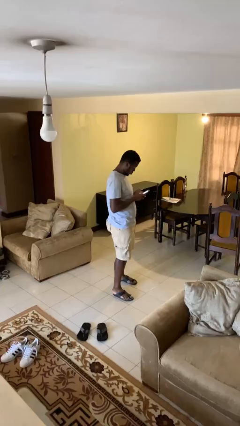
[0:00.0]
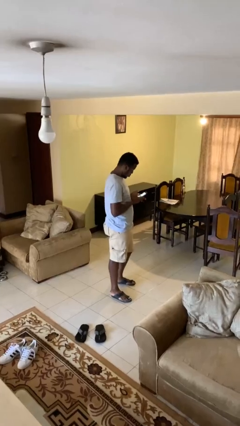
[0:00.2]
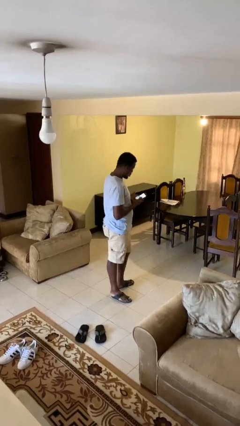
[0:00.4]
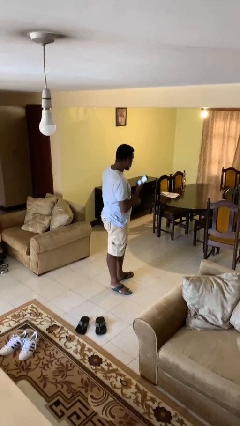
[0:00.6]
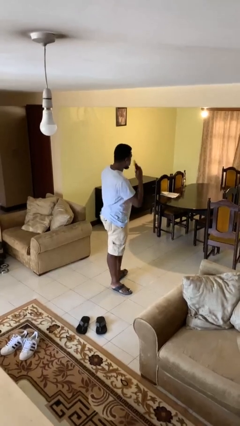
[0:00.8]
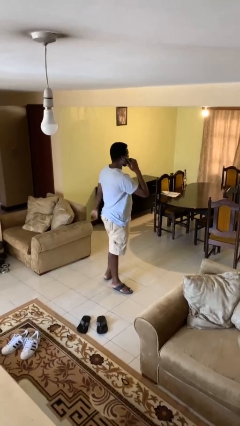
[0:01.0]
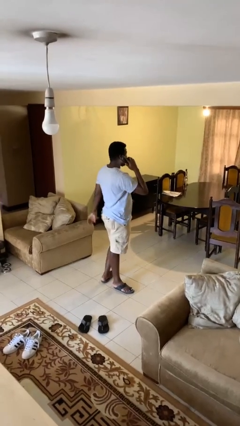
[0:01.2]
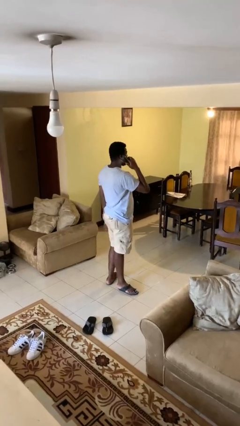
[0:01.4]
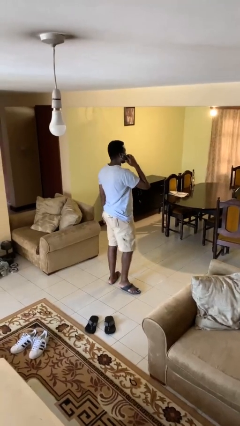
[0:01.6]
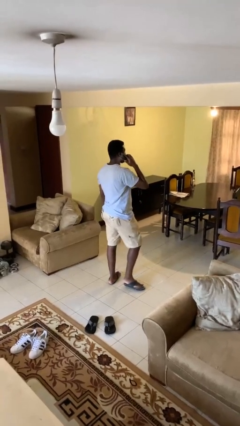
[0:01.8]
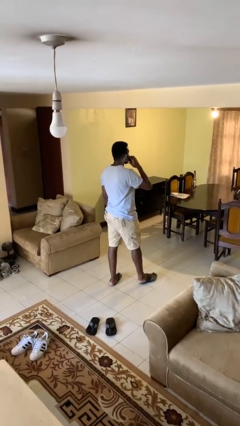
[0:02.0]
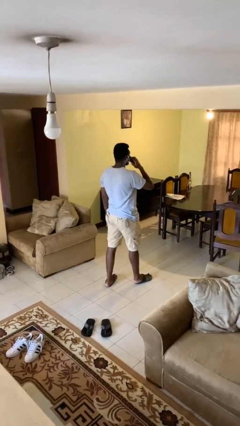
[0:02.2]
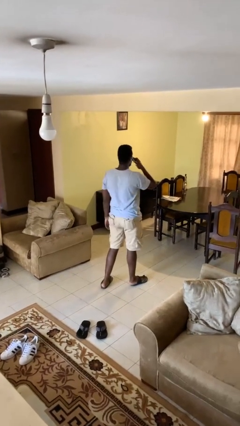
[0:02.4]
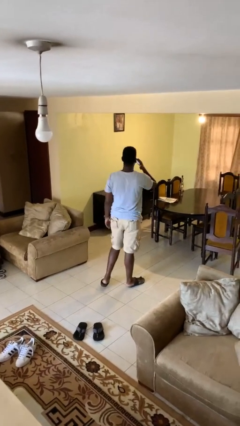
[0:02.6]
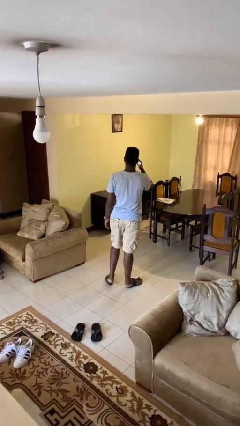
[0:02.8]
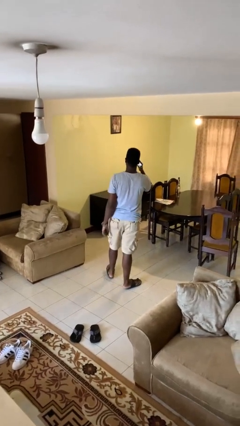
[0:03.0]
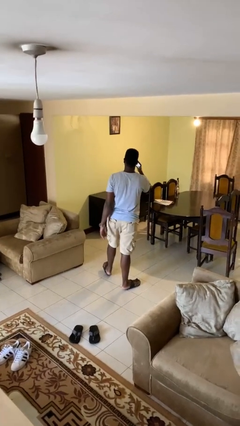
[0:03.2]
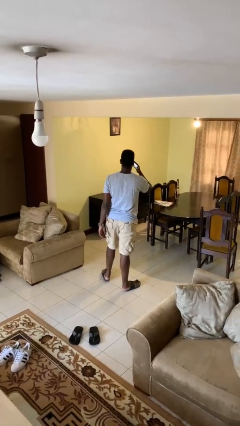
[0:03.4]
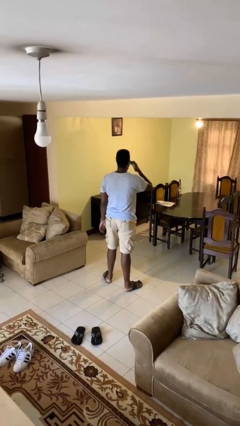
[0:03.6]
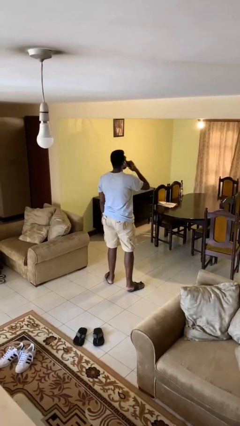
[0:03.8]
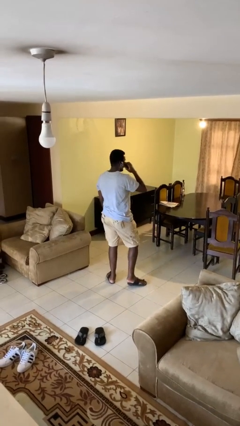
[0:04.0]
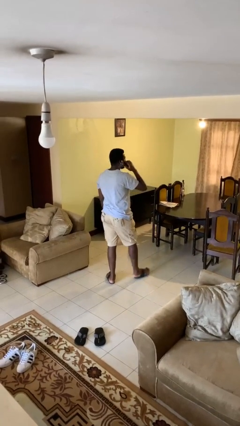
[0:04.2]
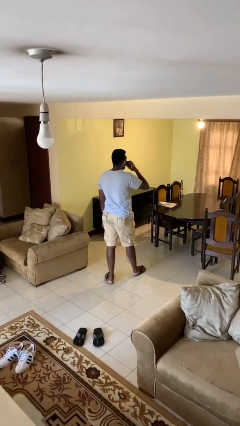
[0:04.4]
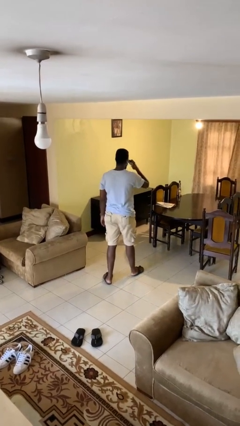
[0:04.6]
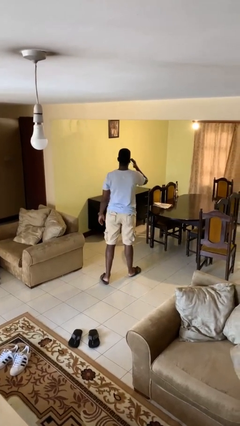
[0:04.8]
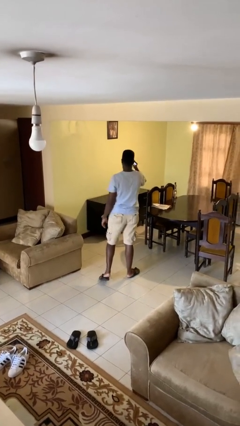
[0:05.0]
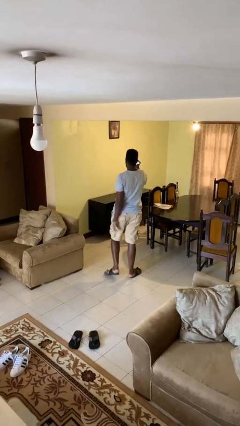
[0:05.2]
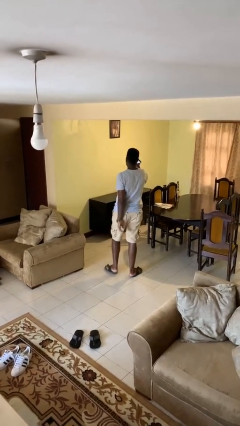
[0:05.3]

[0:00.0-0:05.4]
person talks on phone

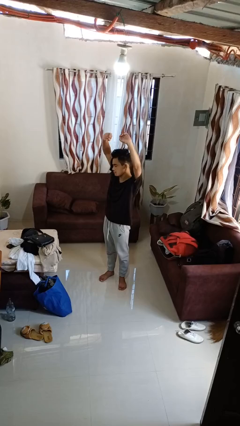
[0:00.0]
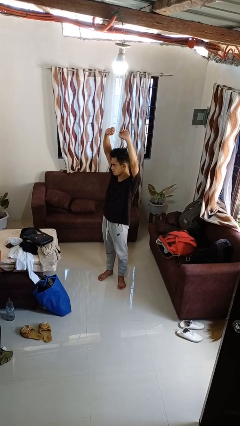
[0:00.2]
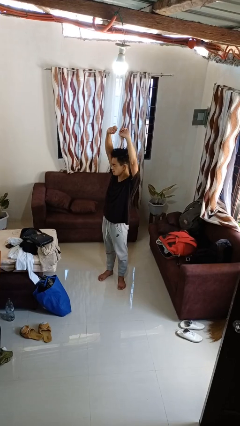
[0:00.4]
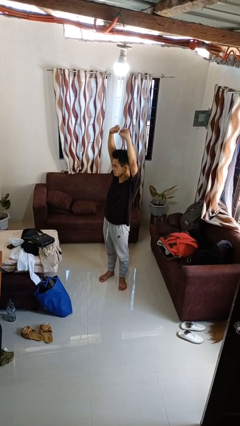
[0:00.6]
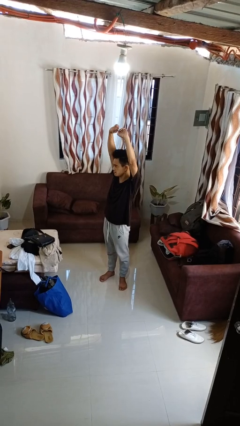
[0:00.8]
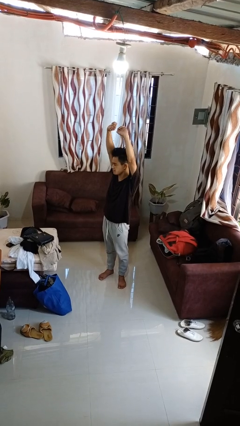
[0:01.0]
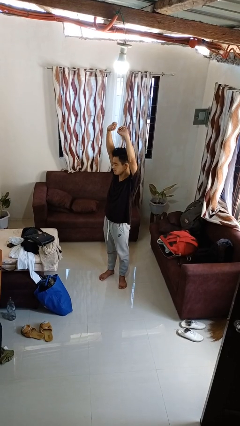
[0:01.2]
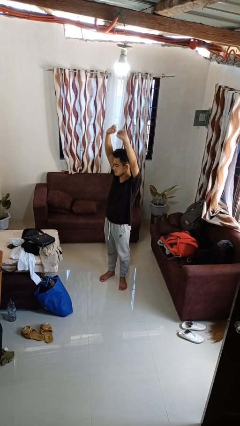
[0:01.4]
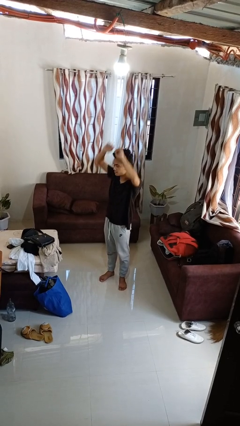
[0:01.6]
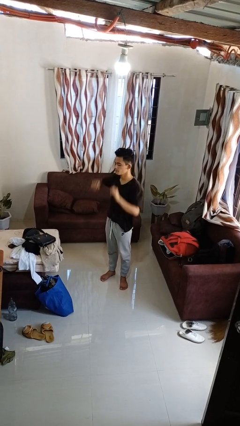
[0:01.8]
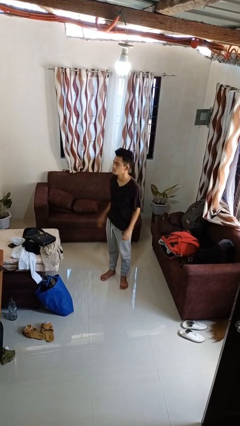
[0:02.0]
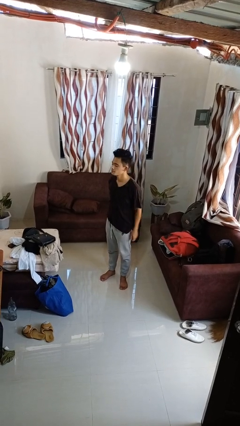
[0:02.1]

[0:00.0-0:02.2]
person stretches arms over head

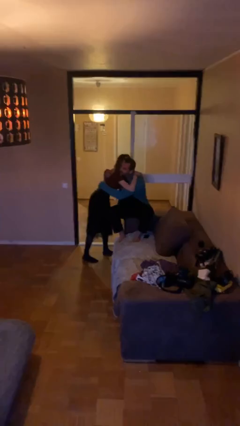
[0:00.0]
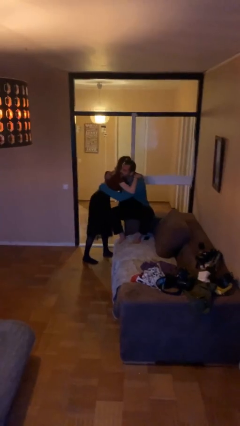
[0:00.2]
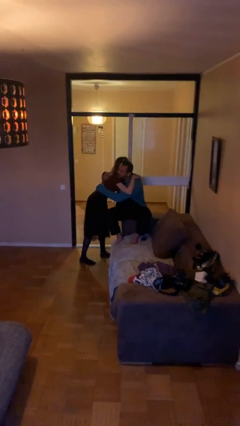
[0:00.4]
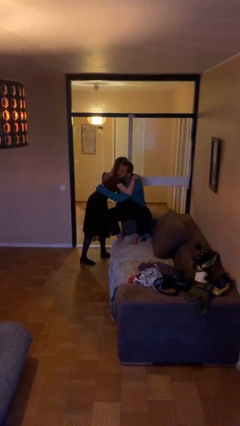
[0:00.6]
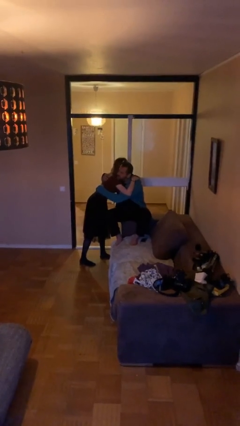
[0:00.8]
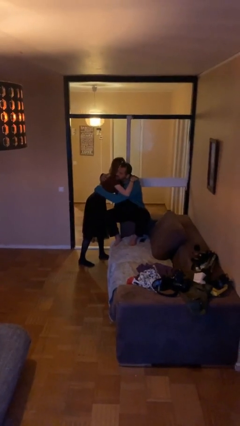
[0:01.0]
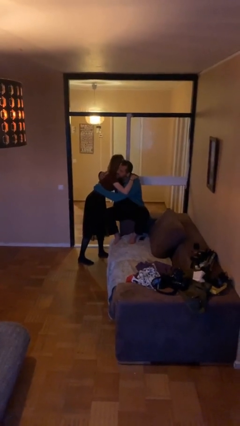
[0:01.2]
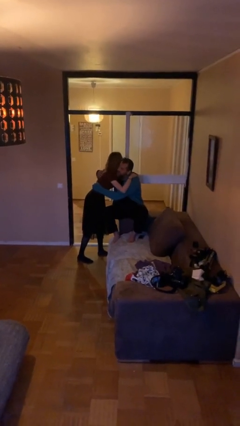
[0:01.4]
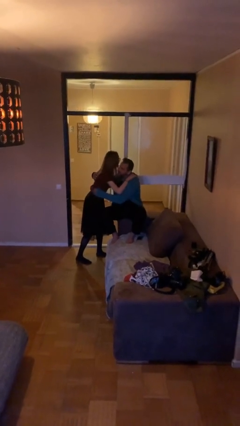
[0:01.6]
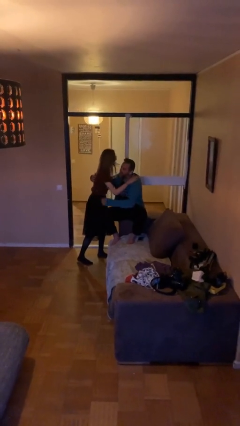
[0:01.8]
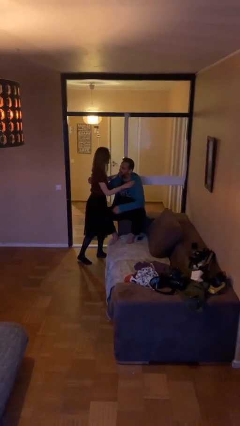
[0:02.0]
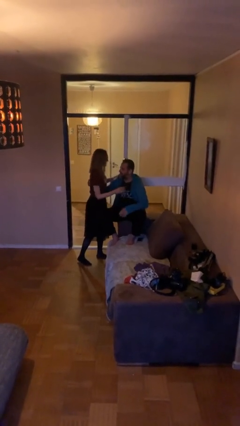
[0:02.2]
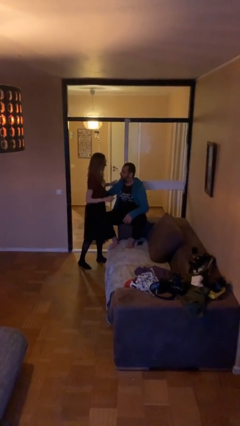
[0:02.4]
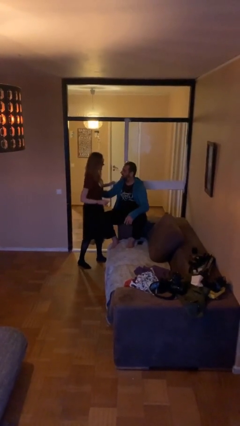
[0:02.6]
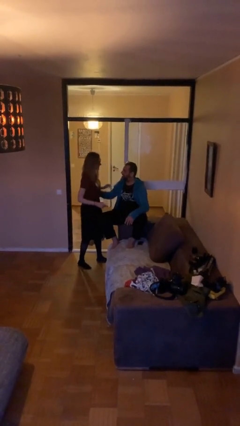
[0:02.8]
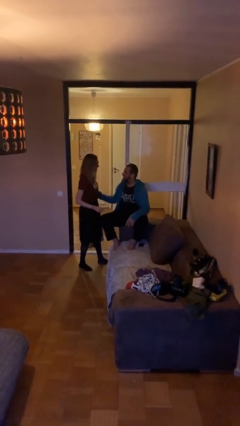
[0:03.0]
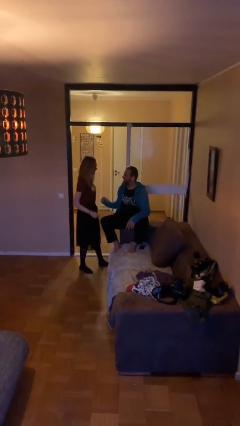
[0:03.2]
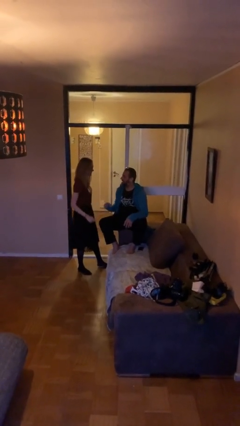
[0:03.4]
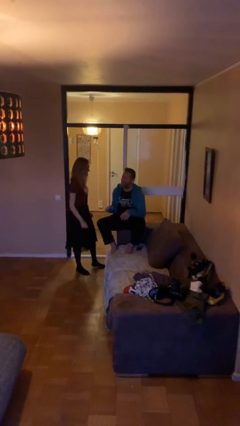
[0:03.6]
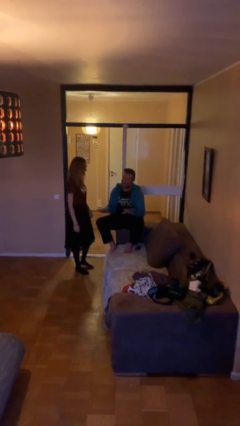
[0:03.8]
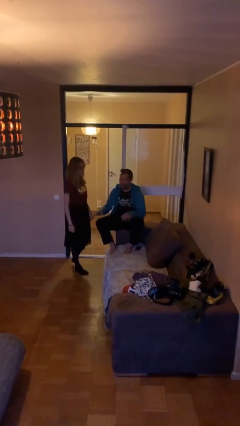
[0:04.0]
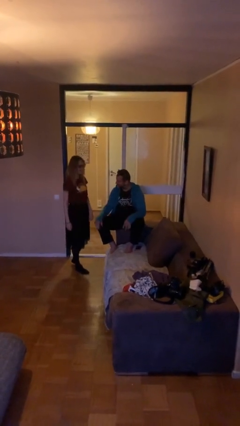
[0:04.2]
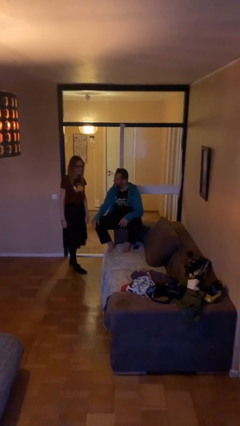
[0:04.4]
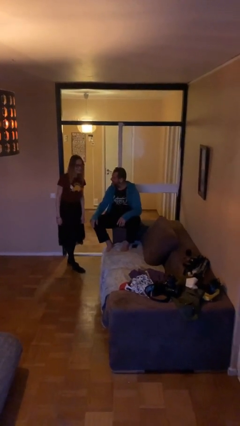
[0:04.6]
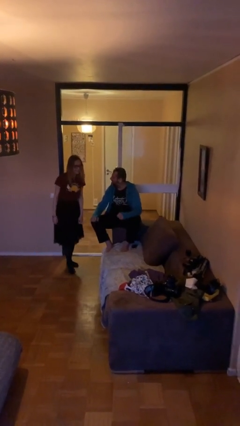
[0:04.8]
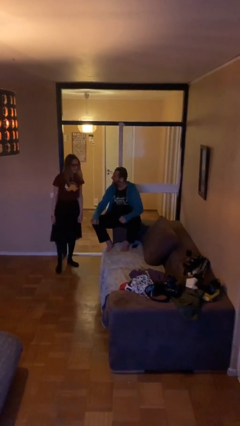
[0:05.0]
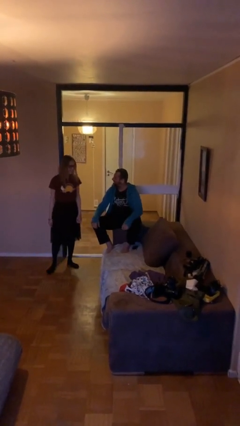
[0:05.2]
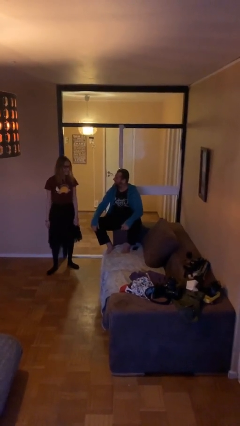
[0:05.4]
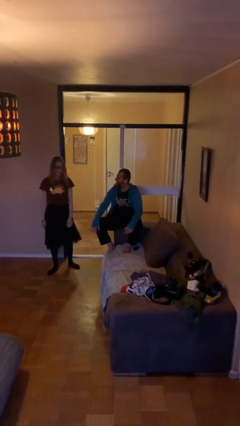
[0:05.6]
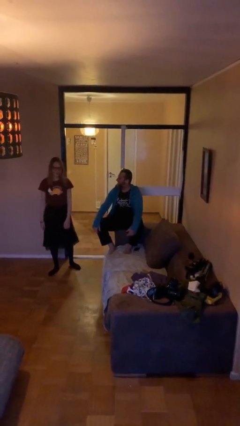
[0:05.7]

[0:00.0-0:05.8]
person embraces person

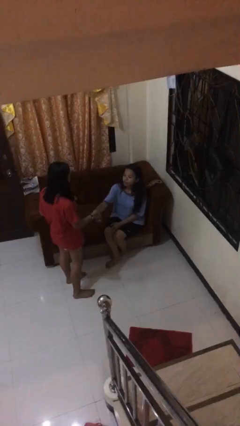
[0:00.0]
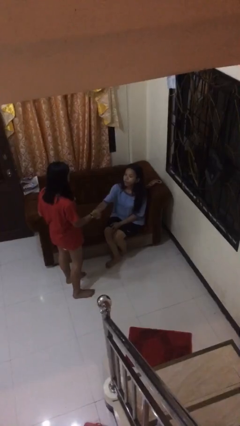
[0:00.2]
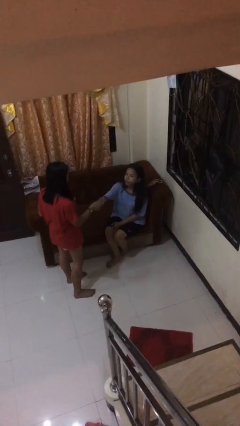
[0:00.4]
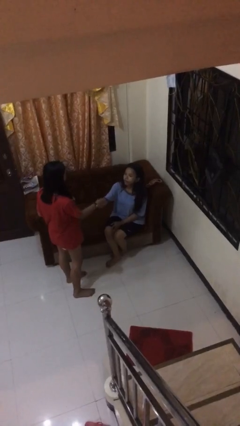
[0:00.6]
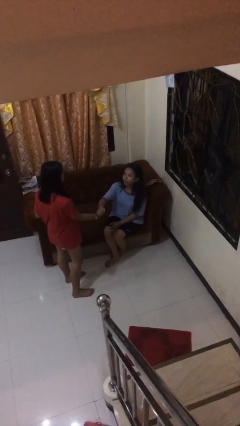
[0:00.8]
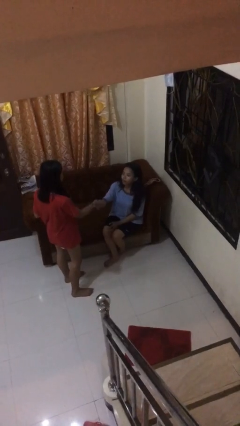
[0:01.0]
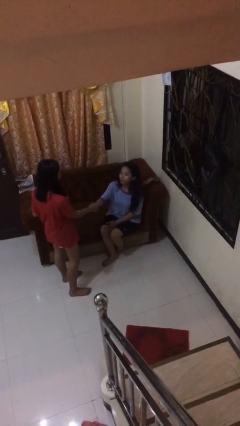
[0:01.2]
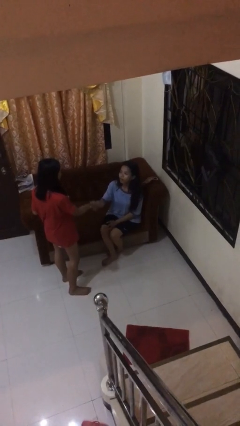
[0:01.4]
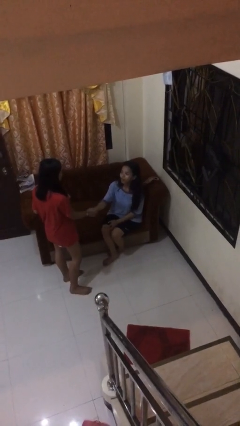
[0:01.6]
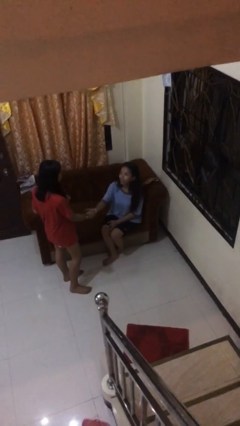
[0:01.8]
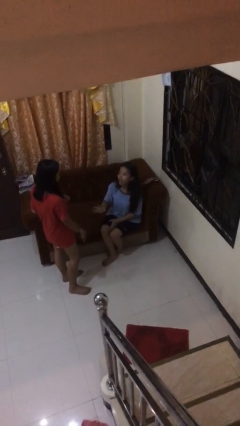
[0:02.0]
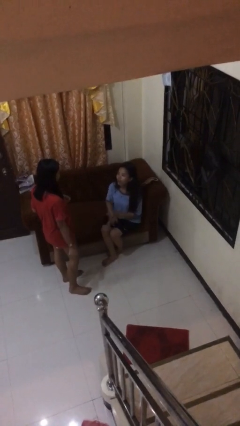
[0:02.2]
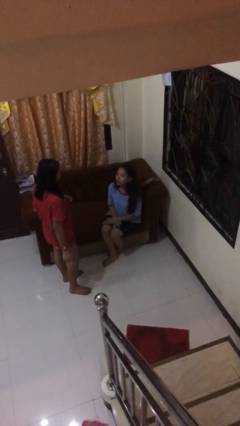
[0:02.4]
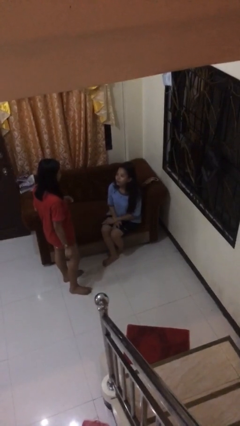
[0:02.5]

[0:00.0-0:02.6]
person shakes hand

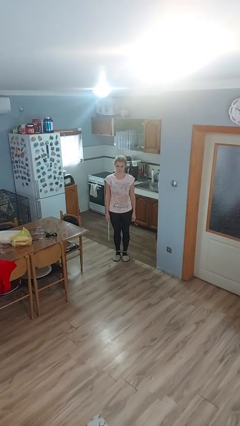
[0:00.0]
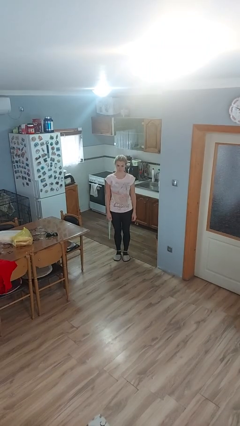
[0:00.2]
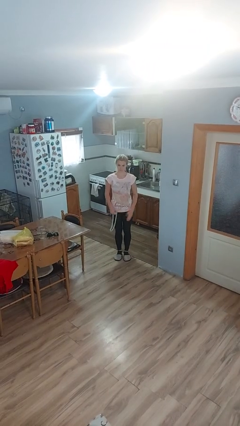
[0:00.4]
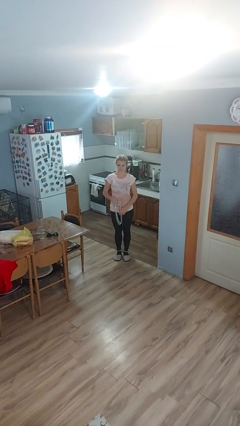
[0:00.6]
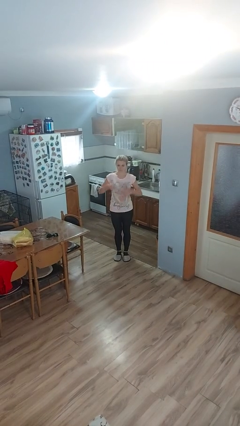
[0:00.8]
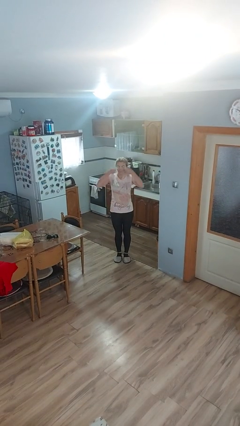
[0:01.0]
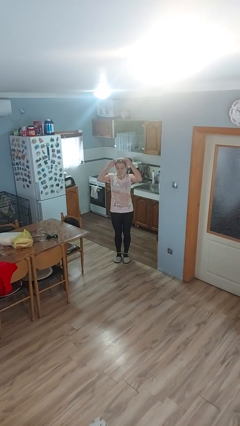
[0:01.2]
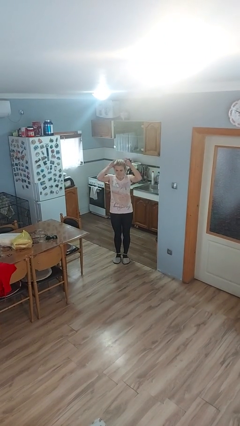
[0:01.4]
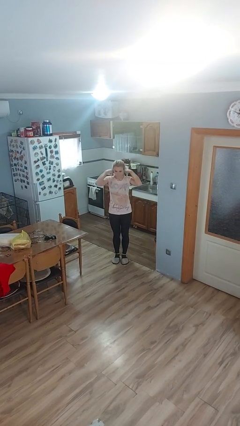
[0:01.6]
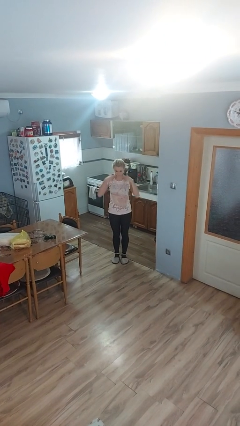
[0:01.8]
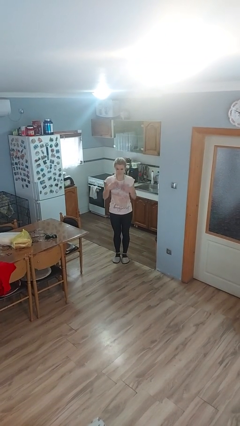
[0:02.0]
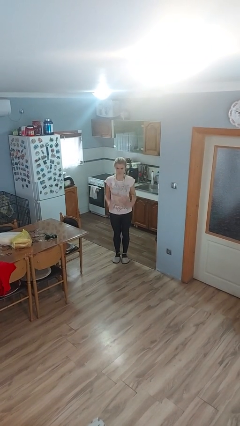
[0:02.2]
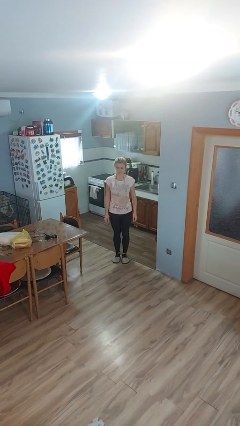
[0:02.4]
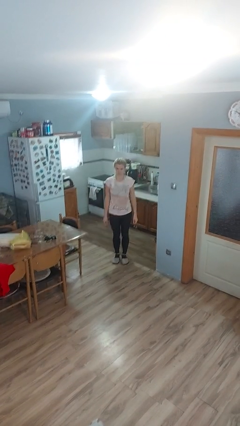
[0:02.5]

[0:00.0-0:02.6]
person puts on necklace
